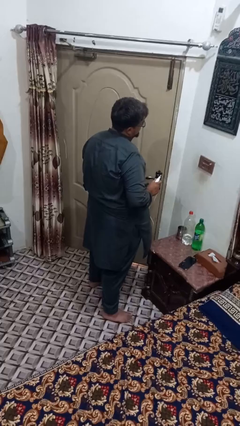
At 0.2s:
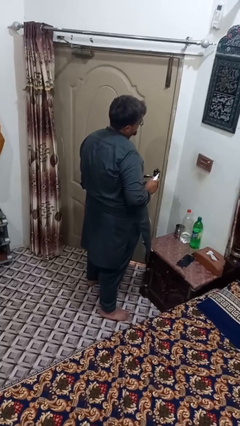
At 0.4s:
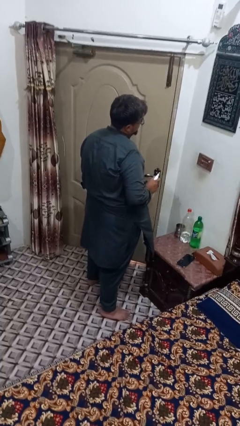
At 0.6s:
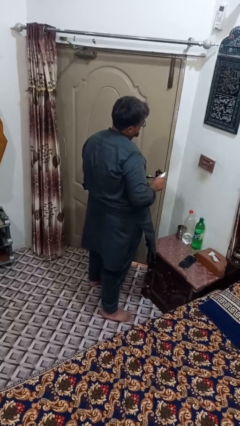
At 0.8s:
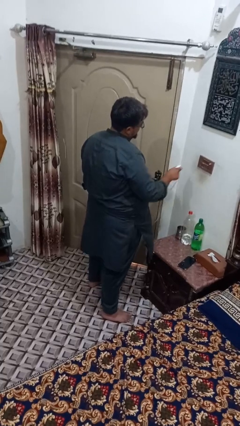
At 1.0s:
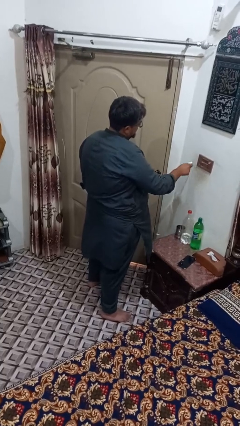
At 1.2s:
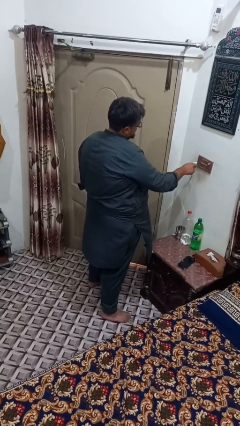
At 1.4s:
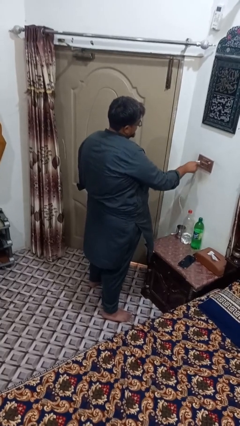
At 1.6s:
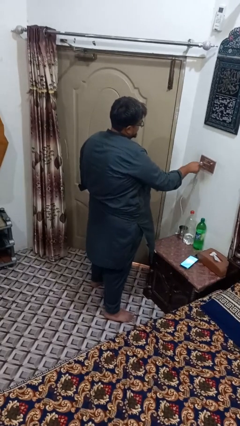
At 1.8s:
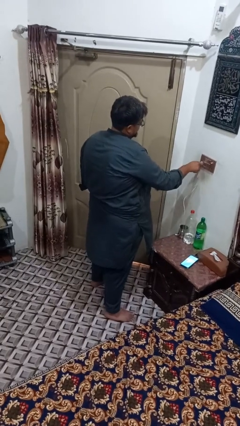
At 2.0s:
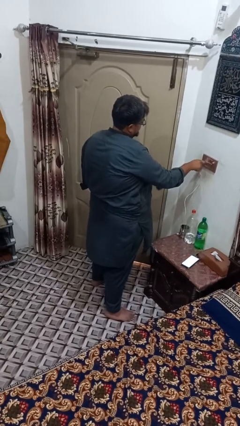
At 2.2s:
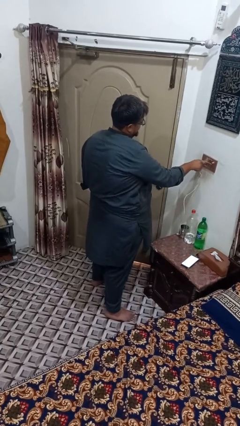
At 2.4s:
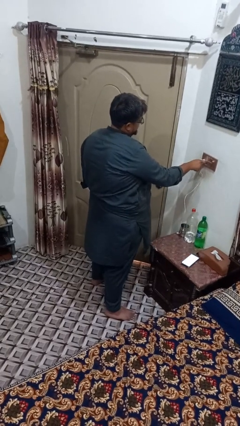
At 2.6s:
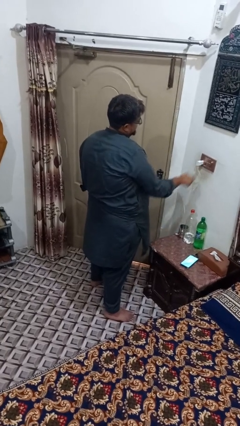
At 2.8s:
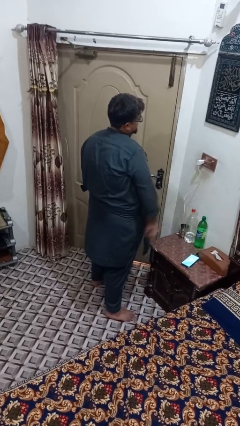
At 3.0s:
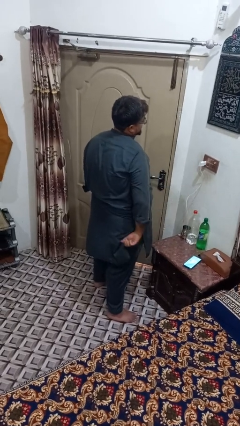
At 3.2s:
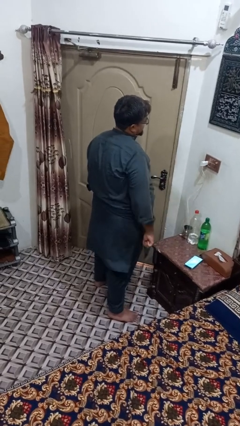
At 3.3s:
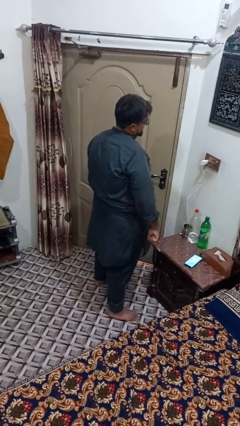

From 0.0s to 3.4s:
person plugs into electrical socket

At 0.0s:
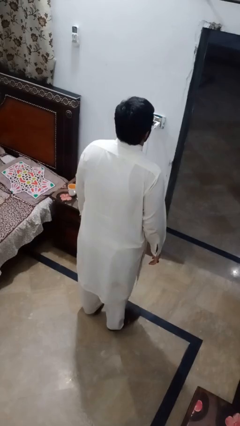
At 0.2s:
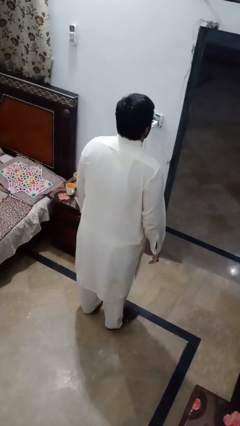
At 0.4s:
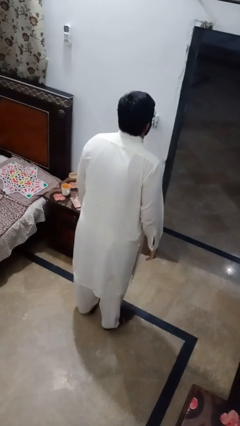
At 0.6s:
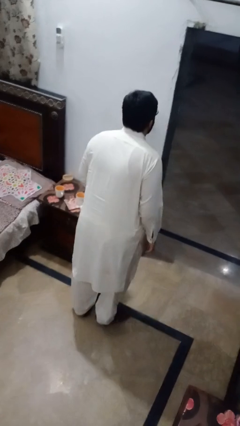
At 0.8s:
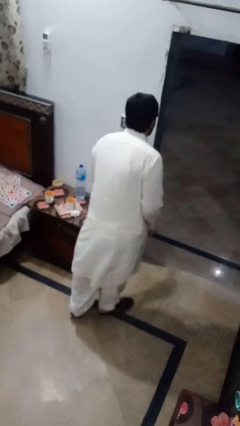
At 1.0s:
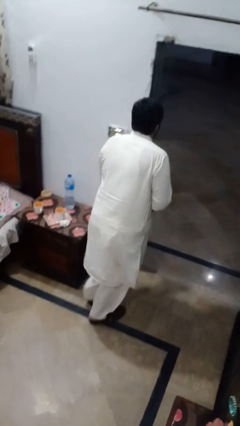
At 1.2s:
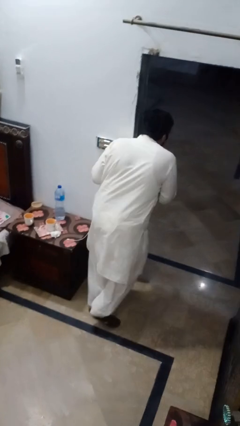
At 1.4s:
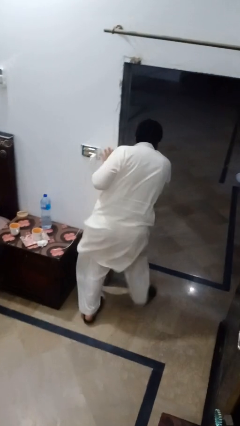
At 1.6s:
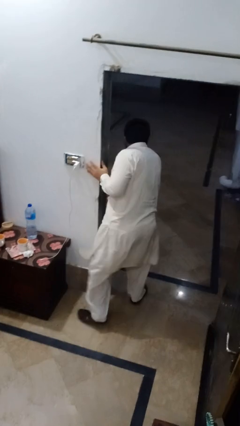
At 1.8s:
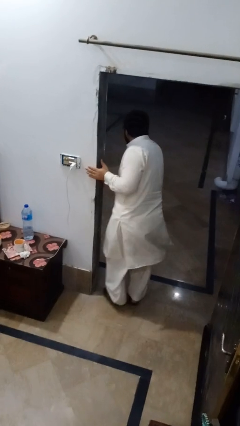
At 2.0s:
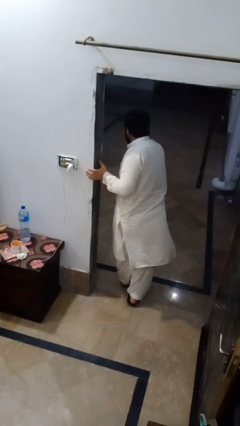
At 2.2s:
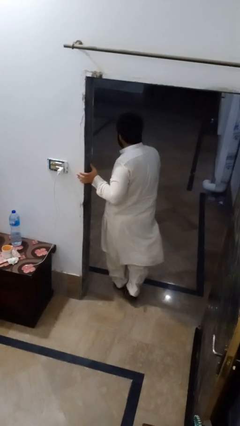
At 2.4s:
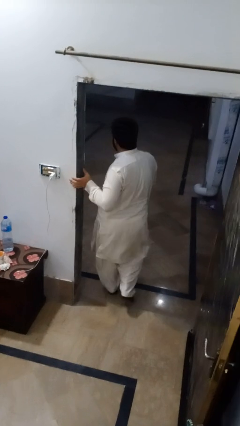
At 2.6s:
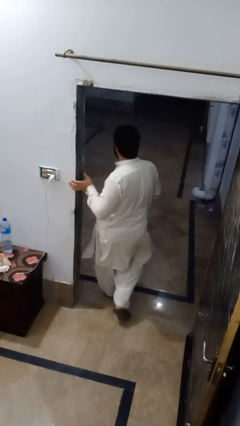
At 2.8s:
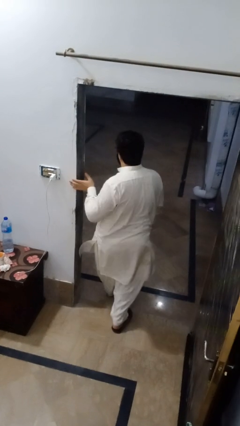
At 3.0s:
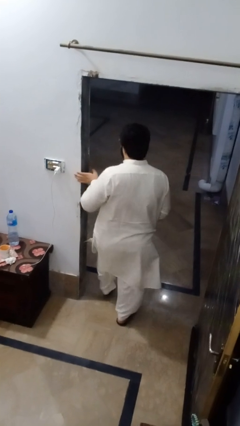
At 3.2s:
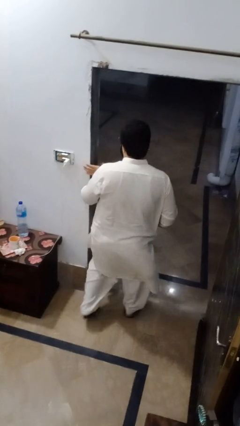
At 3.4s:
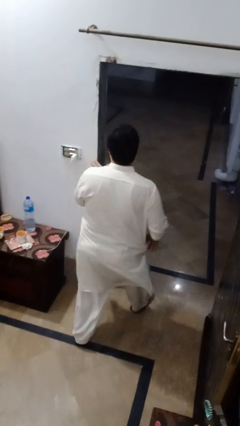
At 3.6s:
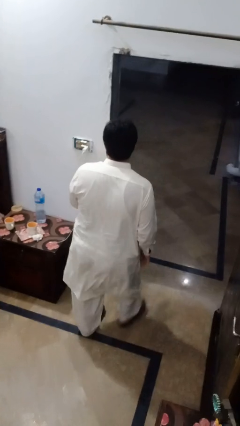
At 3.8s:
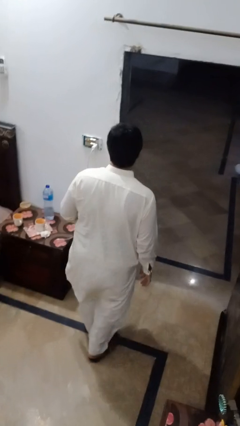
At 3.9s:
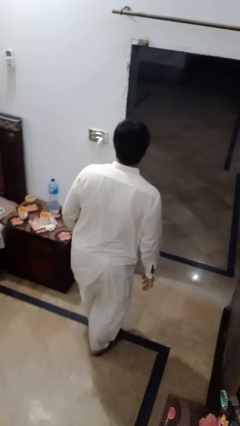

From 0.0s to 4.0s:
person bumps into wall

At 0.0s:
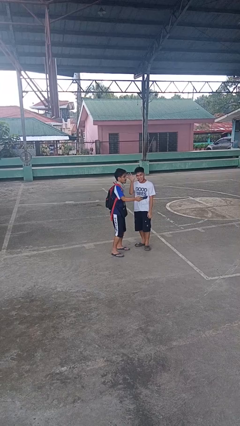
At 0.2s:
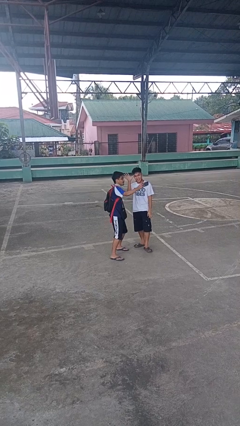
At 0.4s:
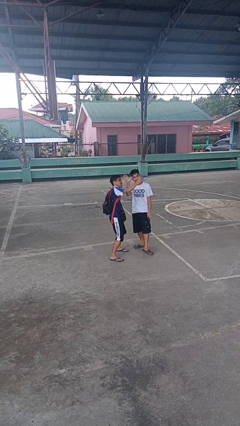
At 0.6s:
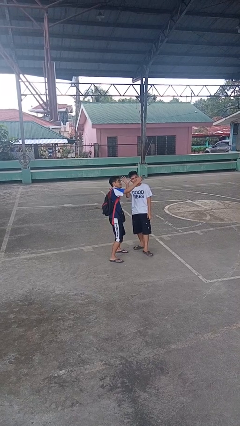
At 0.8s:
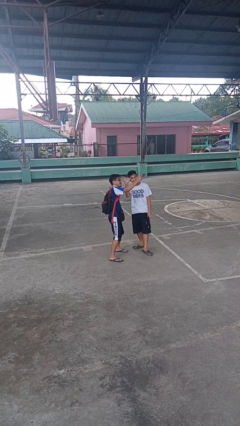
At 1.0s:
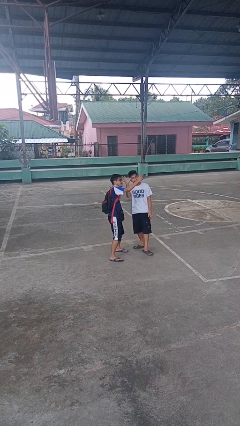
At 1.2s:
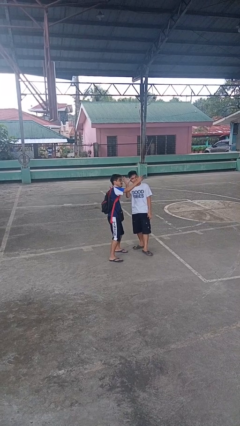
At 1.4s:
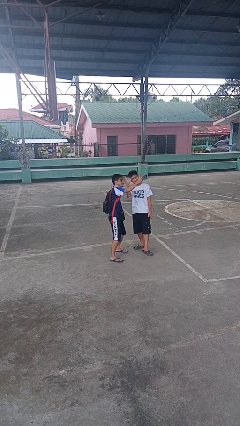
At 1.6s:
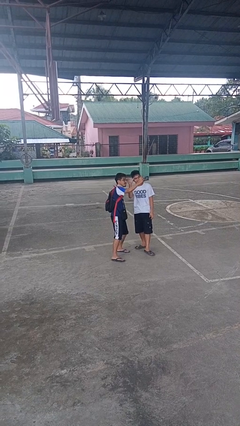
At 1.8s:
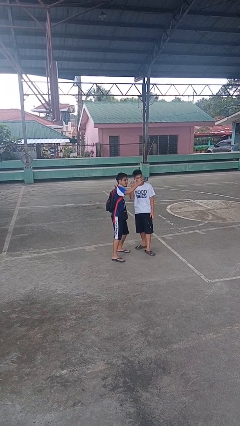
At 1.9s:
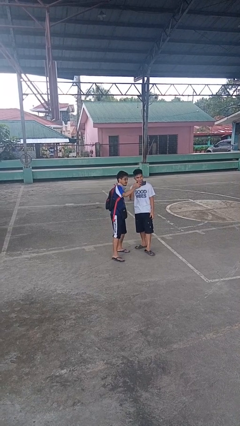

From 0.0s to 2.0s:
person takes selfie with person

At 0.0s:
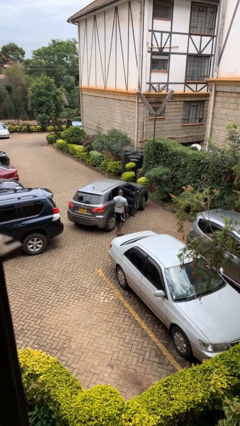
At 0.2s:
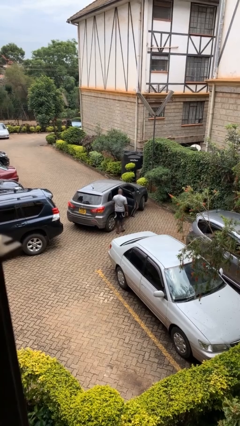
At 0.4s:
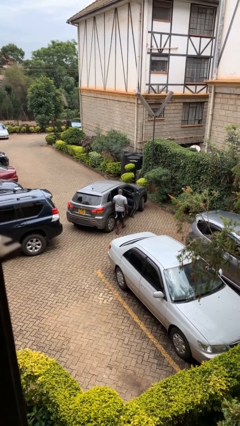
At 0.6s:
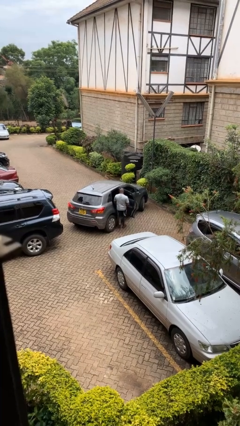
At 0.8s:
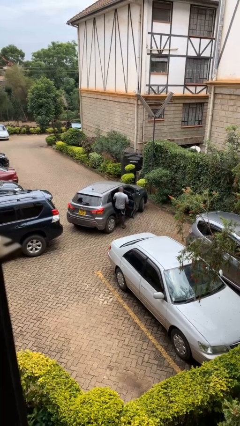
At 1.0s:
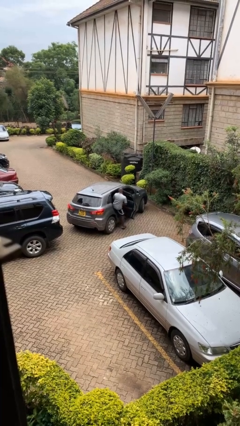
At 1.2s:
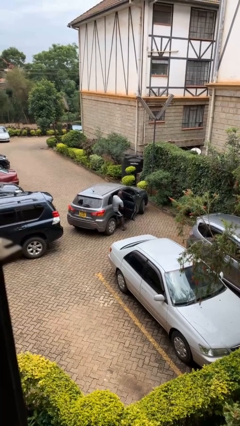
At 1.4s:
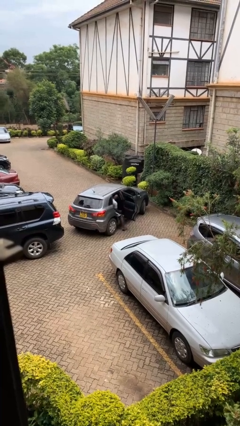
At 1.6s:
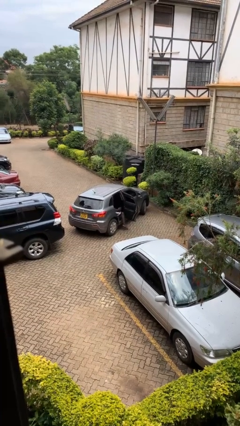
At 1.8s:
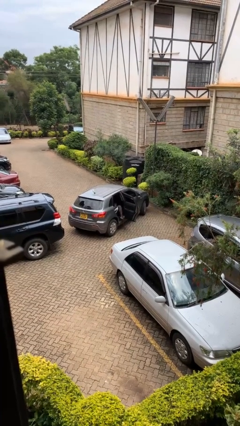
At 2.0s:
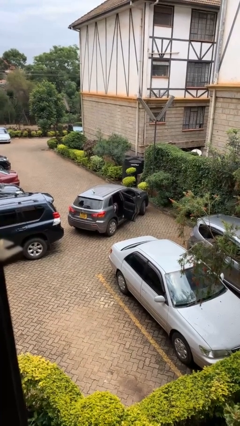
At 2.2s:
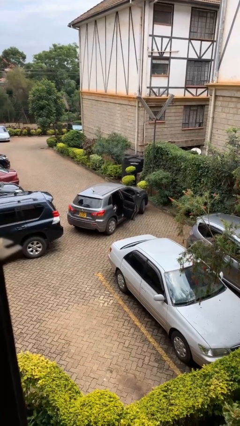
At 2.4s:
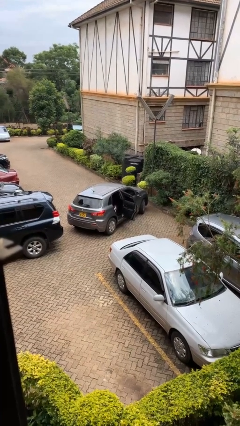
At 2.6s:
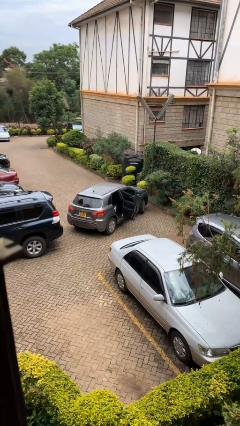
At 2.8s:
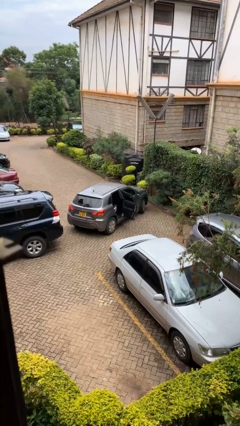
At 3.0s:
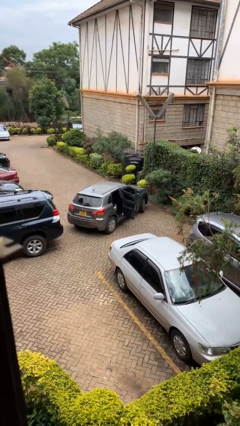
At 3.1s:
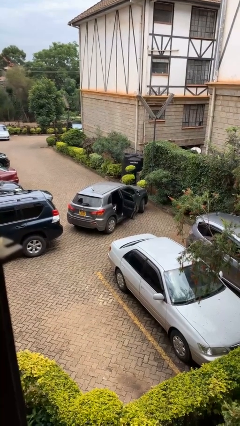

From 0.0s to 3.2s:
person enters car

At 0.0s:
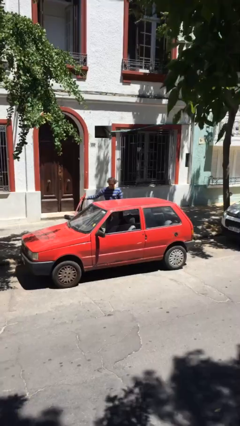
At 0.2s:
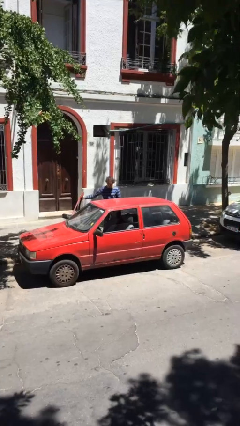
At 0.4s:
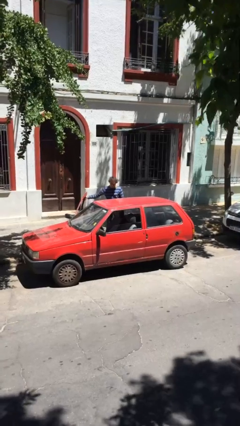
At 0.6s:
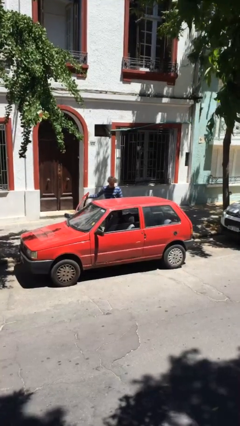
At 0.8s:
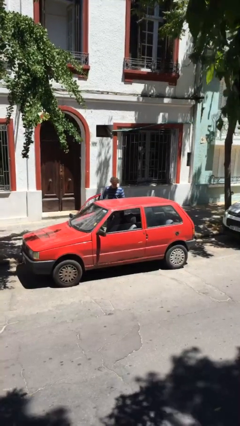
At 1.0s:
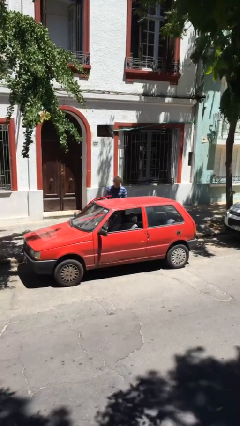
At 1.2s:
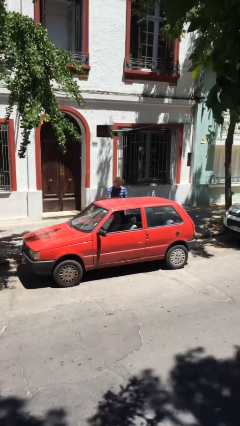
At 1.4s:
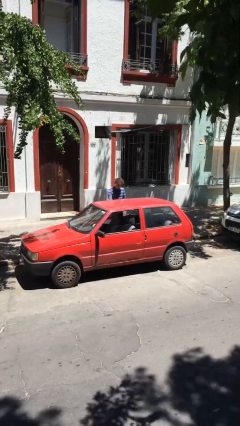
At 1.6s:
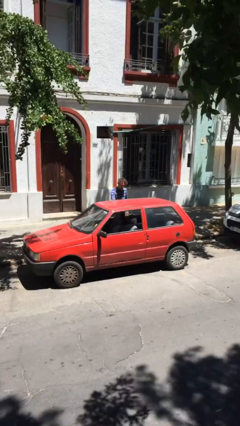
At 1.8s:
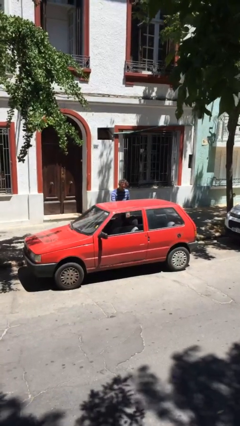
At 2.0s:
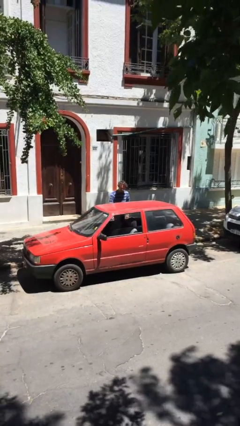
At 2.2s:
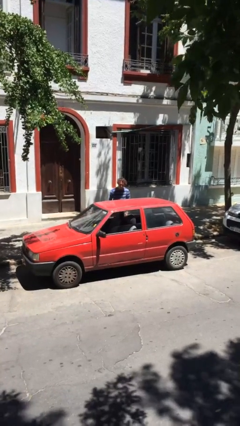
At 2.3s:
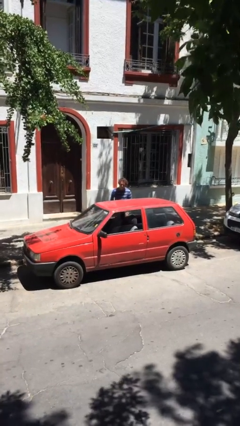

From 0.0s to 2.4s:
person closes car door

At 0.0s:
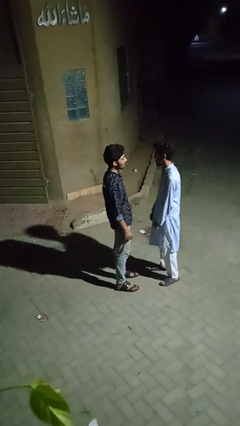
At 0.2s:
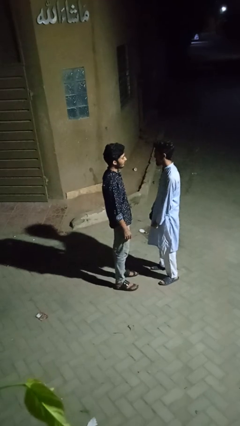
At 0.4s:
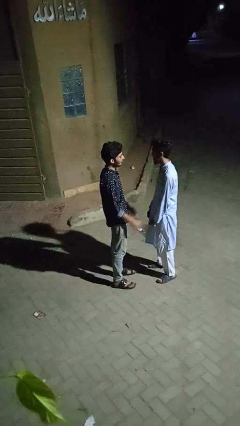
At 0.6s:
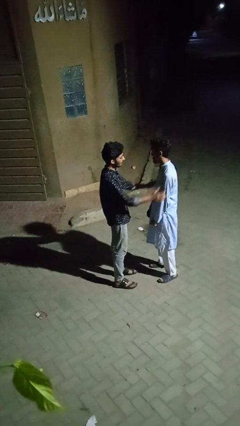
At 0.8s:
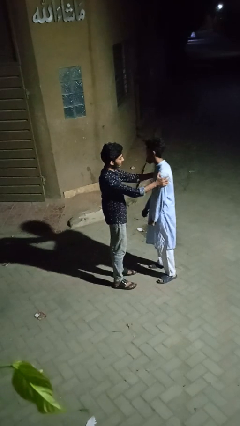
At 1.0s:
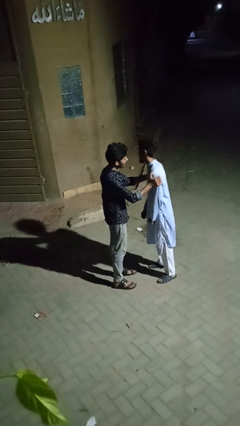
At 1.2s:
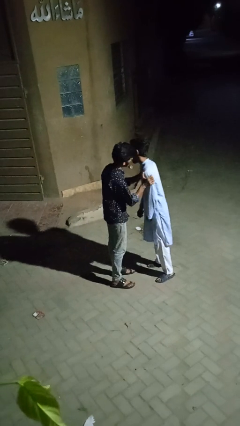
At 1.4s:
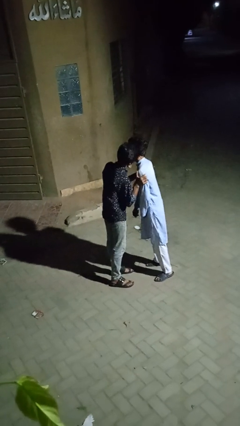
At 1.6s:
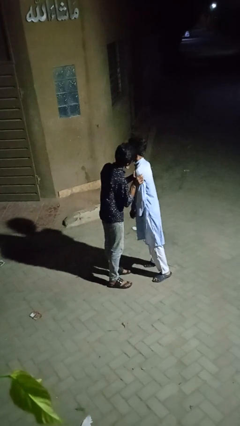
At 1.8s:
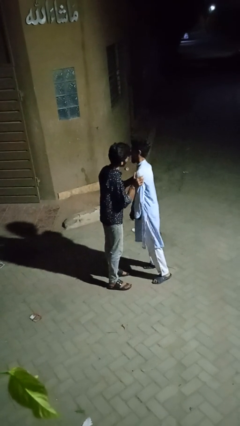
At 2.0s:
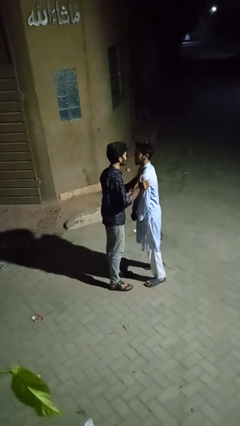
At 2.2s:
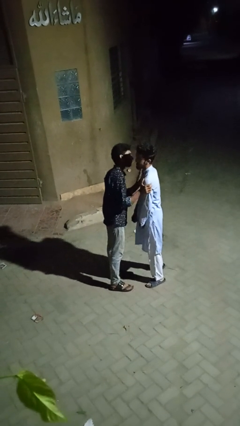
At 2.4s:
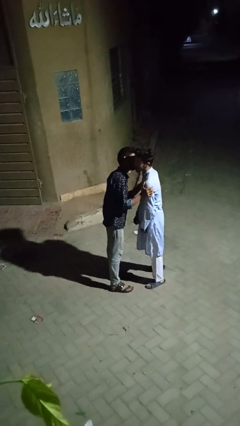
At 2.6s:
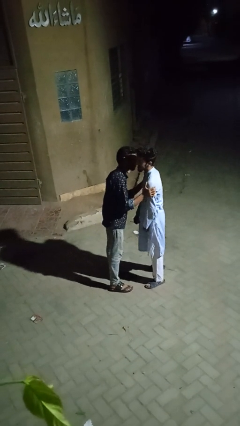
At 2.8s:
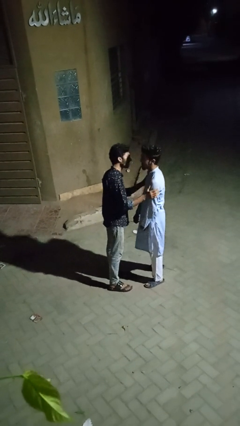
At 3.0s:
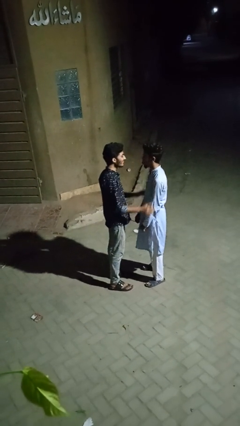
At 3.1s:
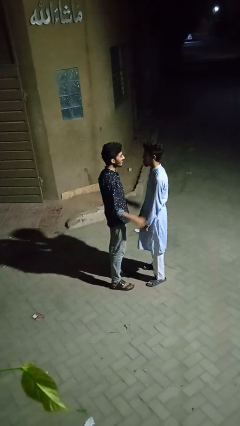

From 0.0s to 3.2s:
person kisses cheek of person
